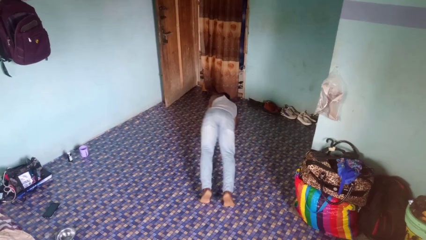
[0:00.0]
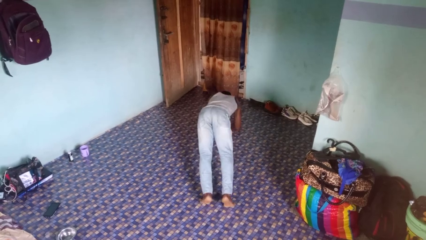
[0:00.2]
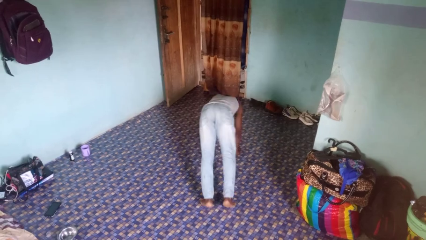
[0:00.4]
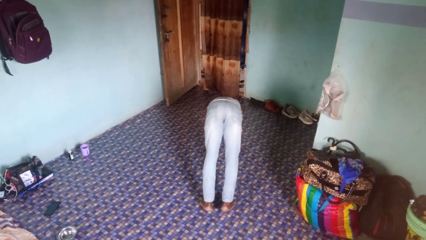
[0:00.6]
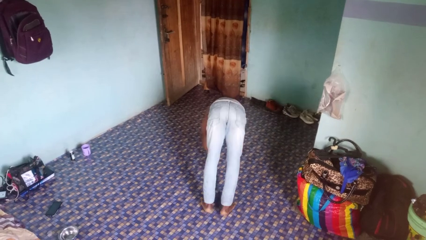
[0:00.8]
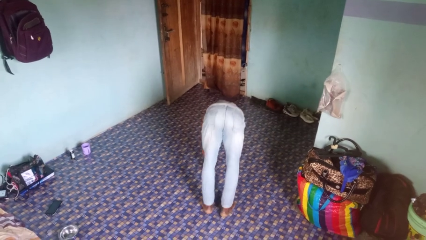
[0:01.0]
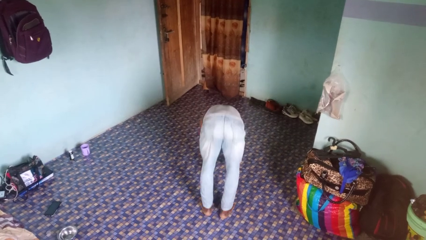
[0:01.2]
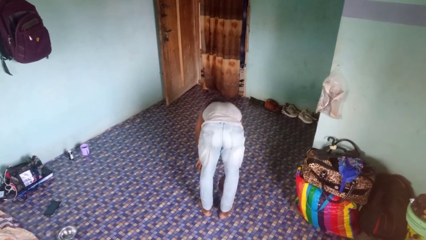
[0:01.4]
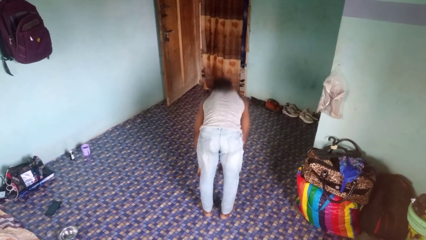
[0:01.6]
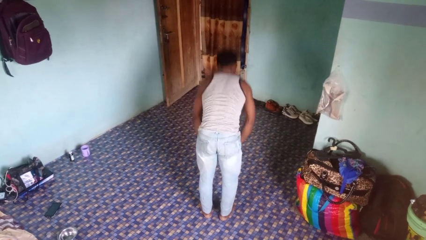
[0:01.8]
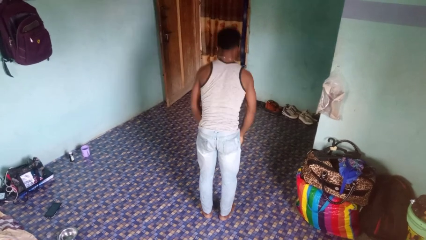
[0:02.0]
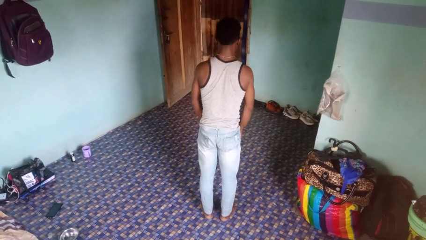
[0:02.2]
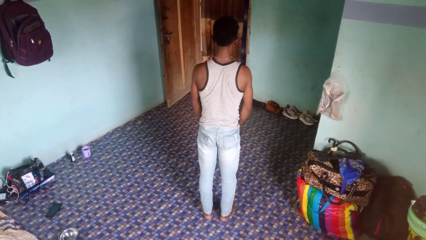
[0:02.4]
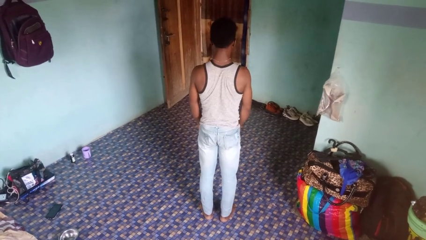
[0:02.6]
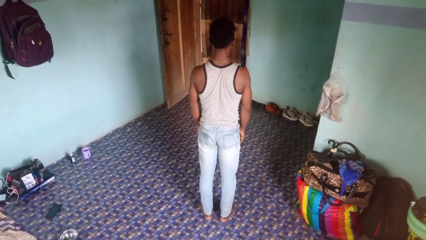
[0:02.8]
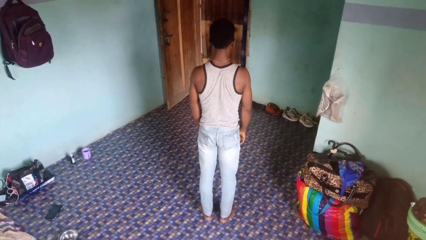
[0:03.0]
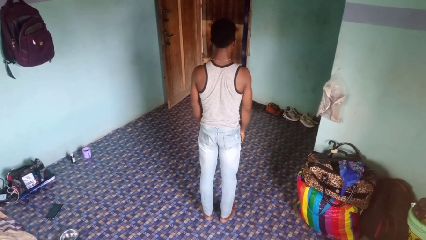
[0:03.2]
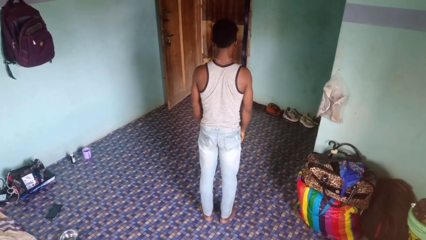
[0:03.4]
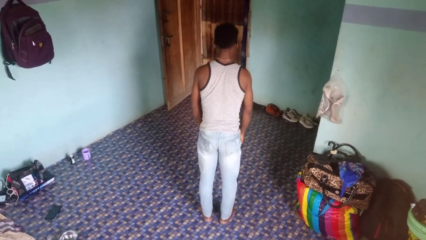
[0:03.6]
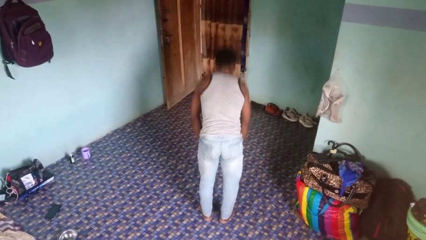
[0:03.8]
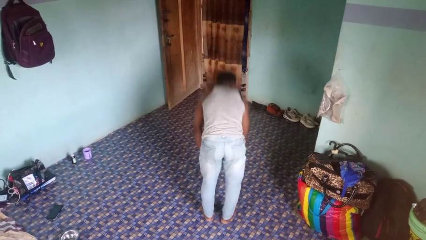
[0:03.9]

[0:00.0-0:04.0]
person stands up from floor

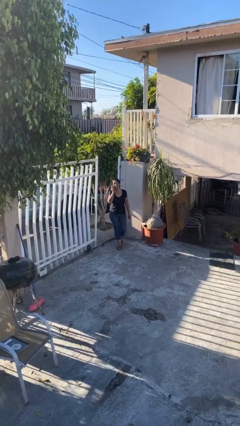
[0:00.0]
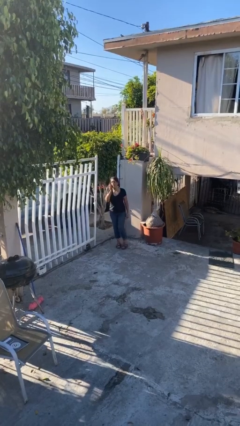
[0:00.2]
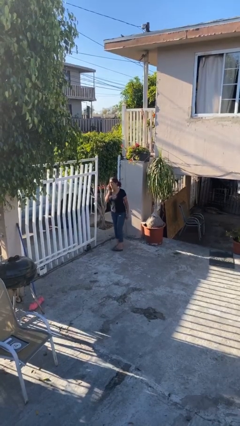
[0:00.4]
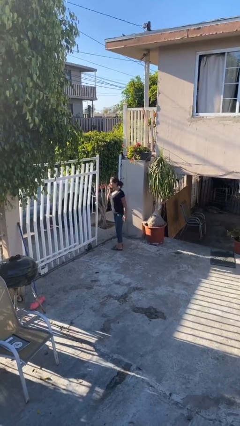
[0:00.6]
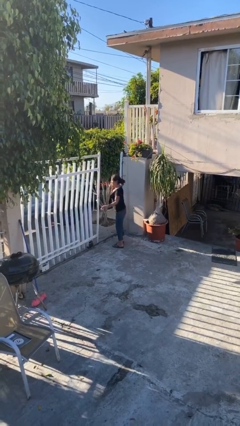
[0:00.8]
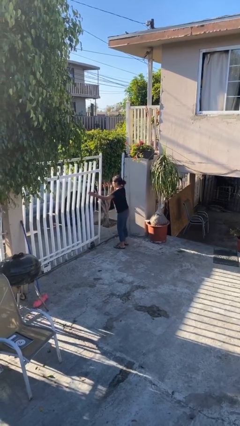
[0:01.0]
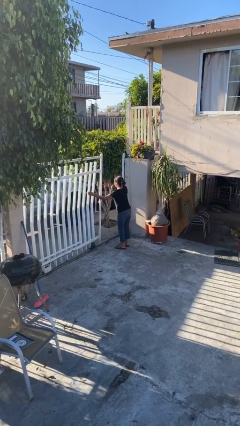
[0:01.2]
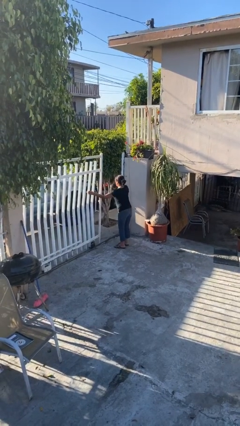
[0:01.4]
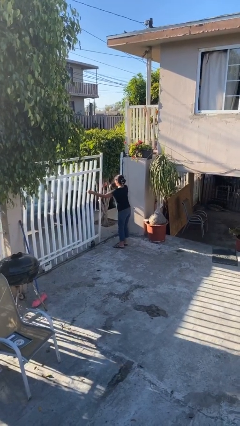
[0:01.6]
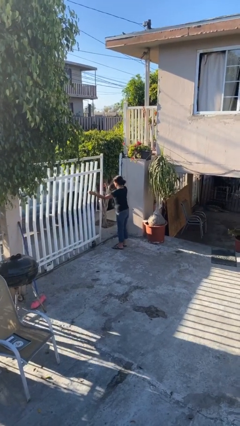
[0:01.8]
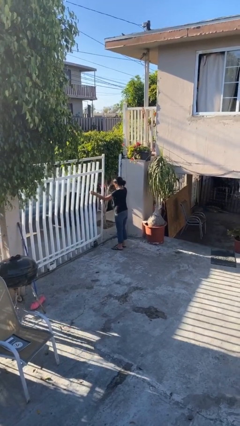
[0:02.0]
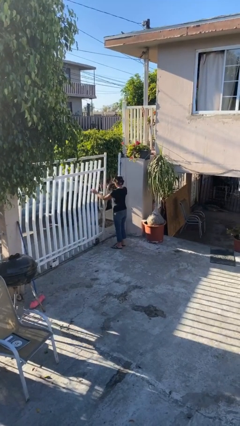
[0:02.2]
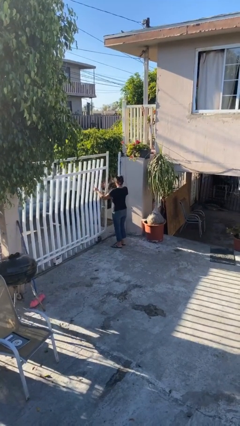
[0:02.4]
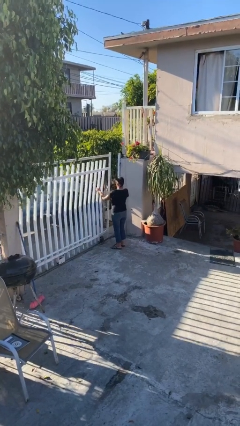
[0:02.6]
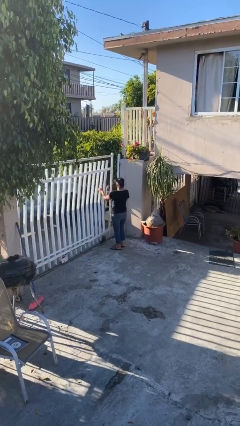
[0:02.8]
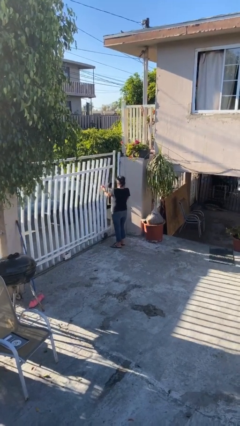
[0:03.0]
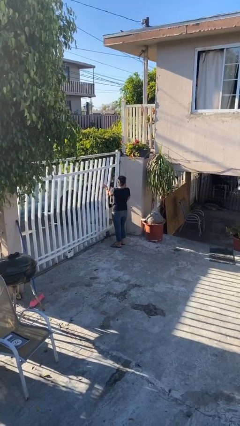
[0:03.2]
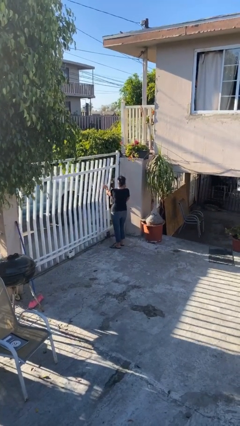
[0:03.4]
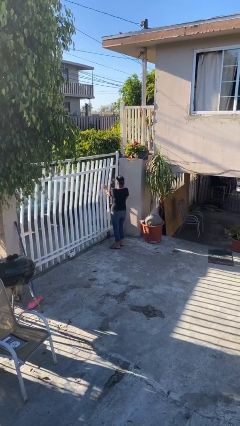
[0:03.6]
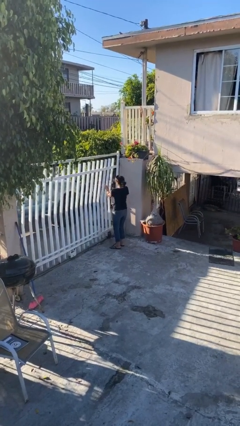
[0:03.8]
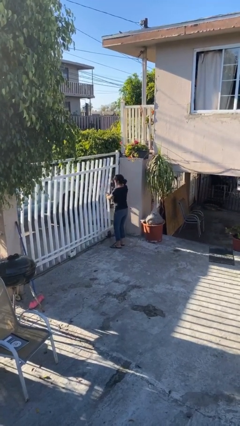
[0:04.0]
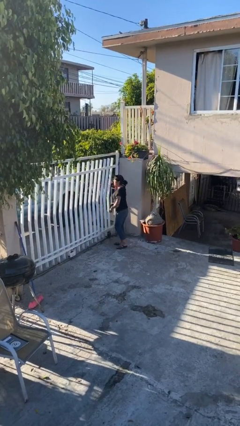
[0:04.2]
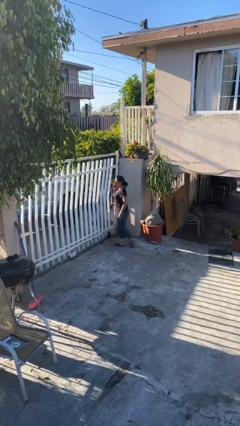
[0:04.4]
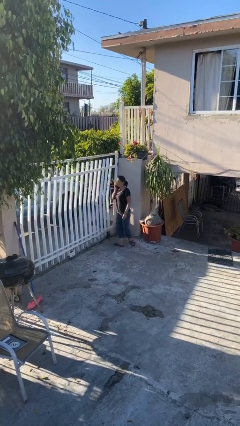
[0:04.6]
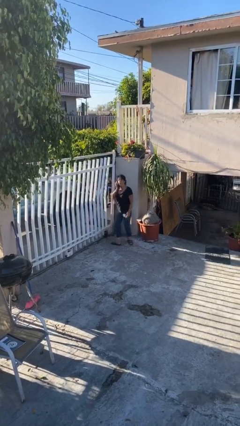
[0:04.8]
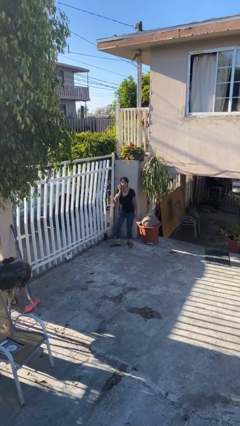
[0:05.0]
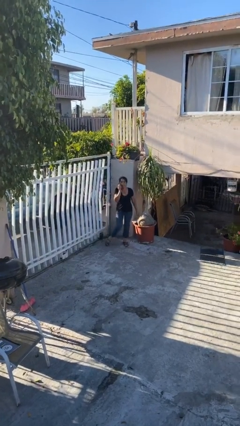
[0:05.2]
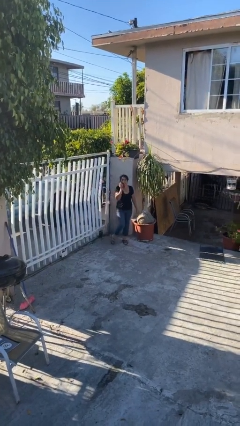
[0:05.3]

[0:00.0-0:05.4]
person closes facility door

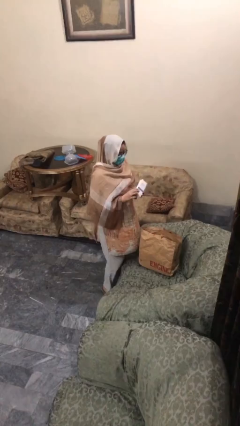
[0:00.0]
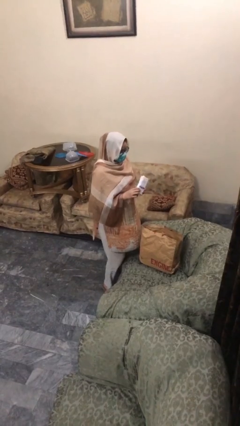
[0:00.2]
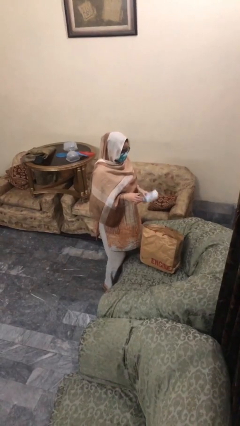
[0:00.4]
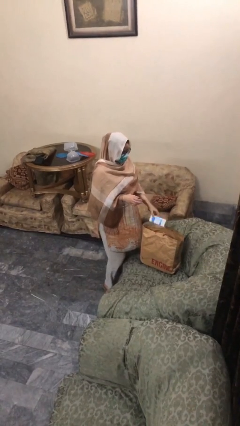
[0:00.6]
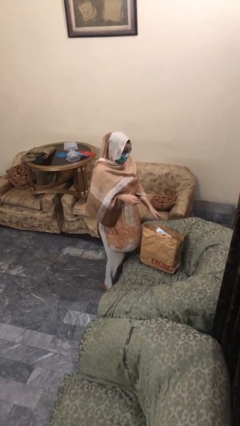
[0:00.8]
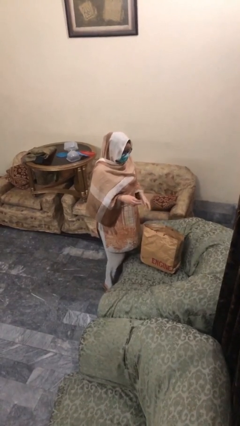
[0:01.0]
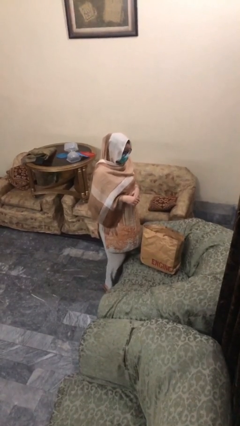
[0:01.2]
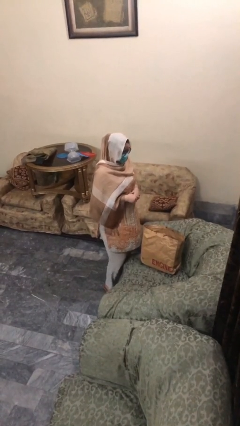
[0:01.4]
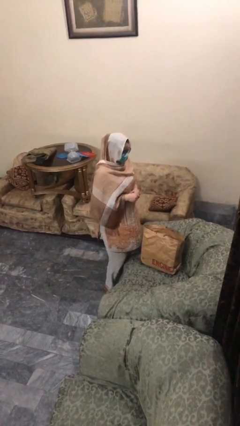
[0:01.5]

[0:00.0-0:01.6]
person puts object into bag

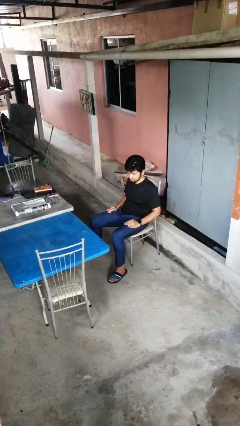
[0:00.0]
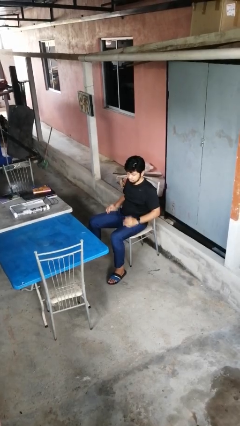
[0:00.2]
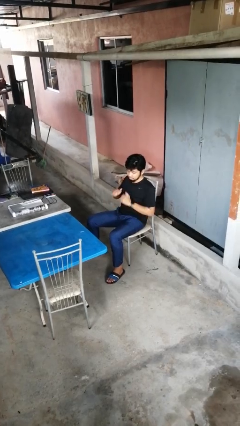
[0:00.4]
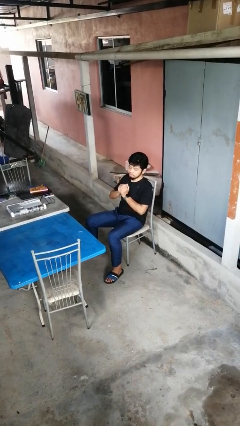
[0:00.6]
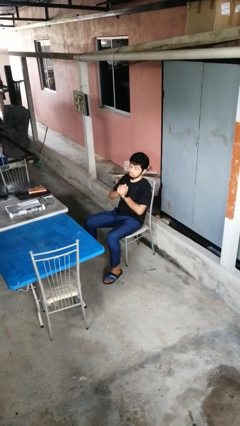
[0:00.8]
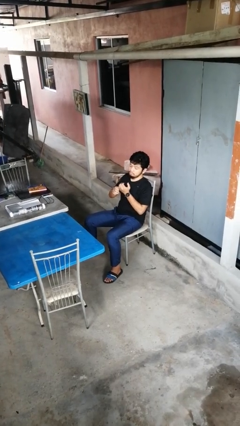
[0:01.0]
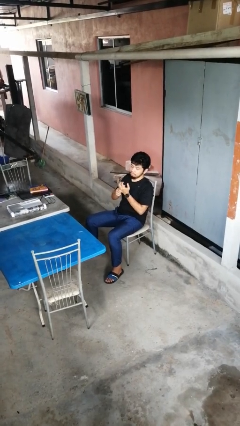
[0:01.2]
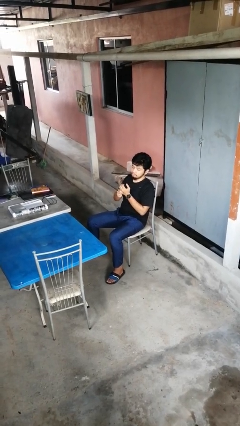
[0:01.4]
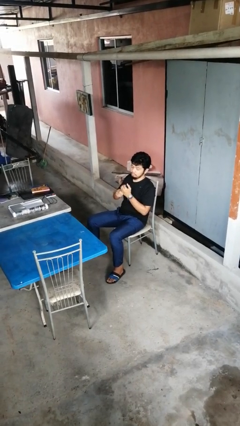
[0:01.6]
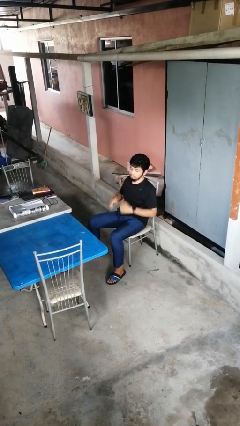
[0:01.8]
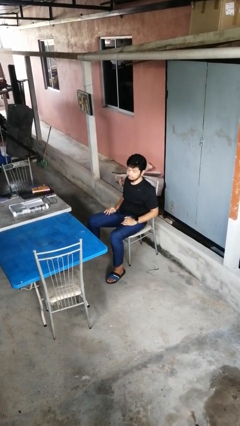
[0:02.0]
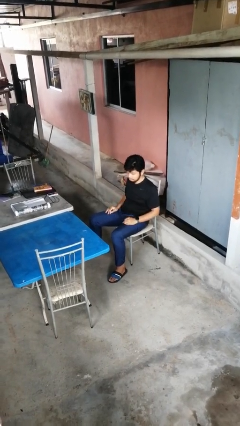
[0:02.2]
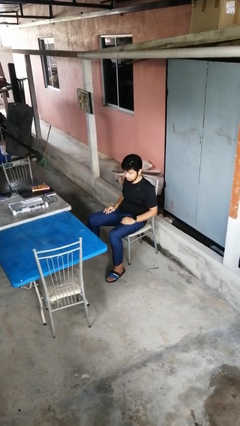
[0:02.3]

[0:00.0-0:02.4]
person cracks knuckles

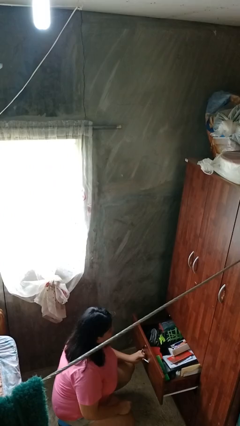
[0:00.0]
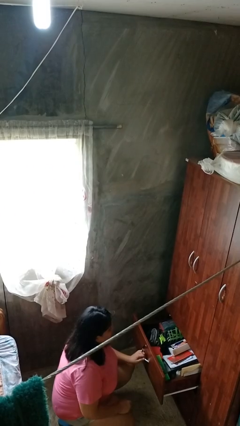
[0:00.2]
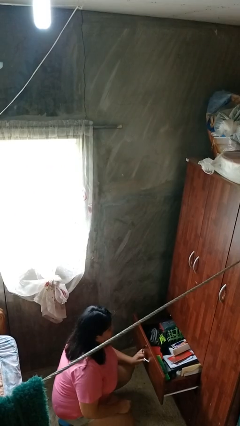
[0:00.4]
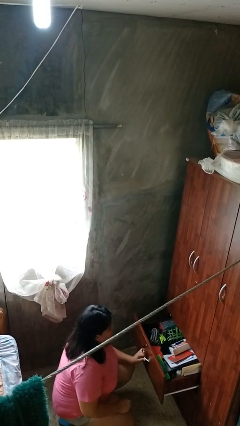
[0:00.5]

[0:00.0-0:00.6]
person closes dresser drawer

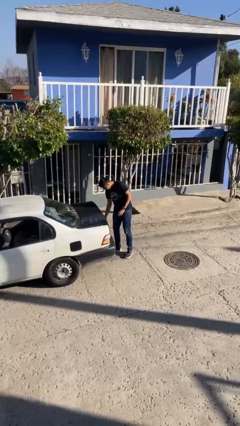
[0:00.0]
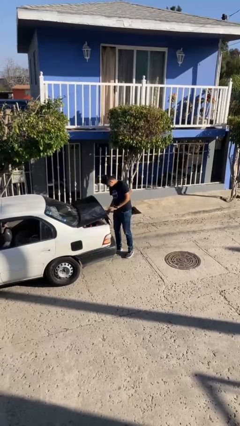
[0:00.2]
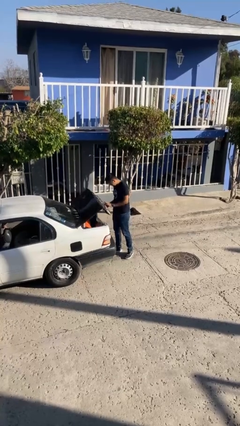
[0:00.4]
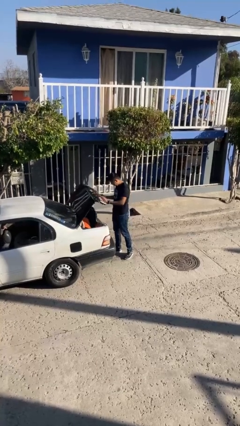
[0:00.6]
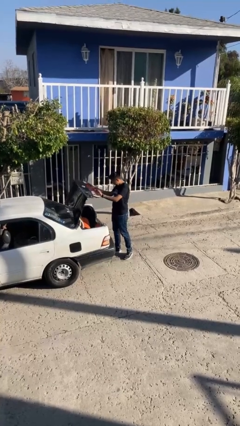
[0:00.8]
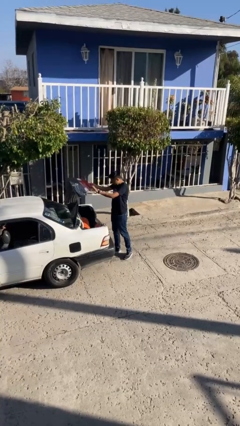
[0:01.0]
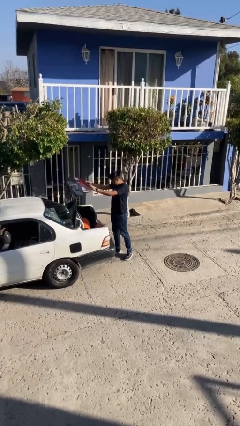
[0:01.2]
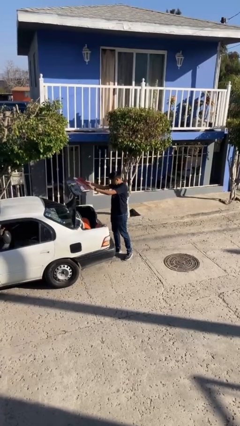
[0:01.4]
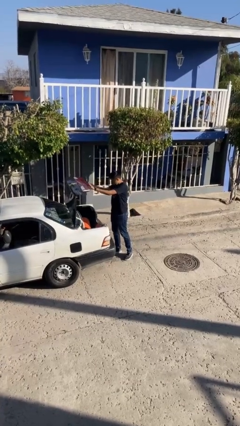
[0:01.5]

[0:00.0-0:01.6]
person opens car trunk

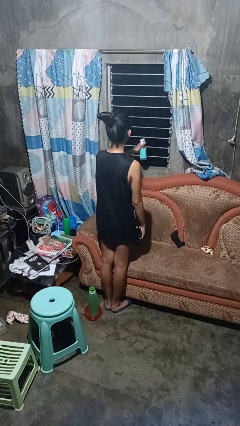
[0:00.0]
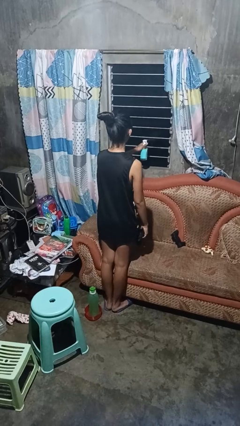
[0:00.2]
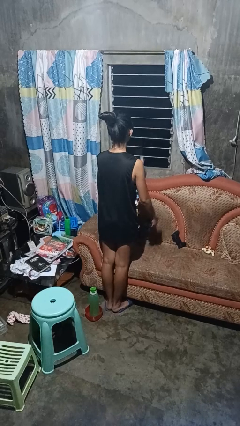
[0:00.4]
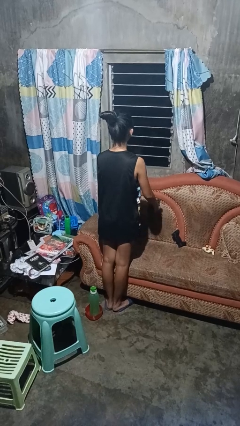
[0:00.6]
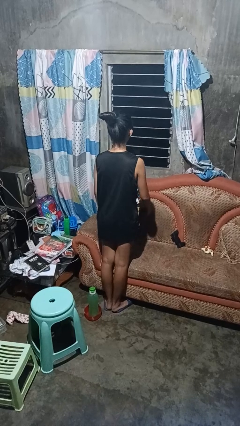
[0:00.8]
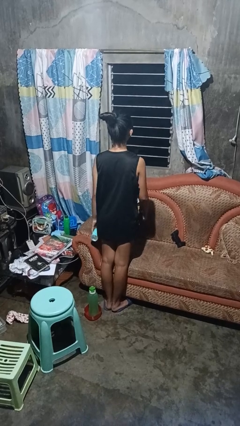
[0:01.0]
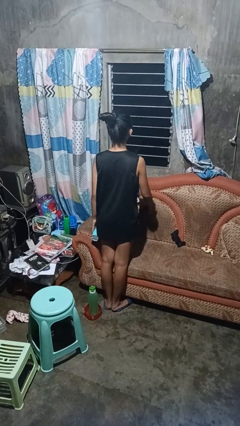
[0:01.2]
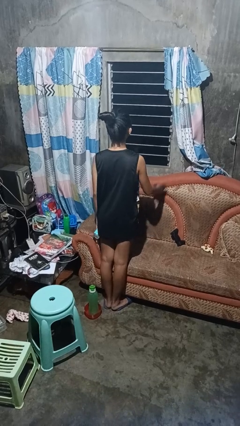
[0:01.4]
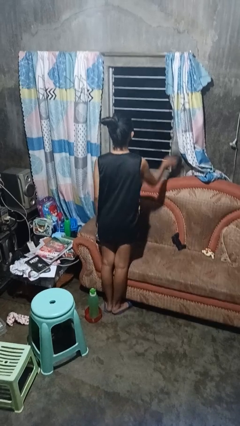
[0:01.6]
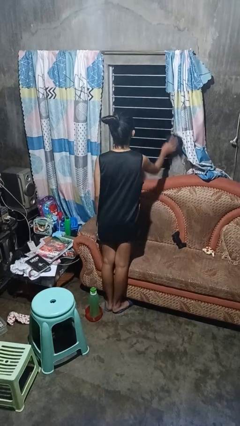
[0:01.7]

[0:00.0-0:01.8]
person sprays from bottle
